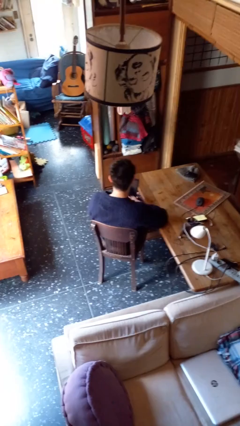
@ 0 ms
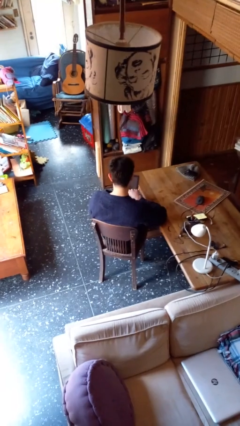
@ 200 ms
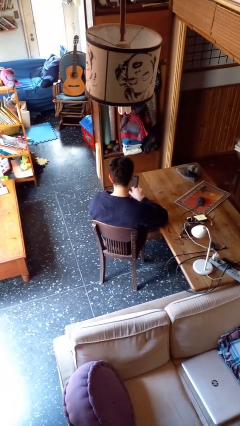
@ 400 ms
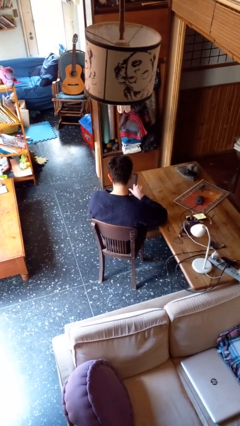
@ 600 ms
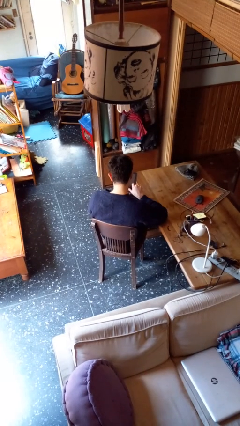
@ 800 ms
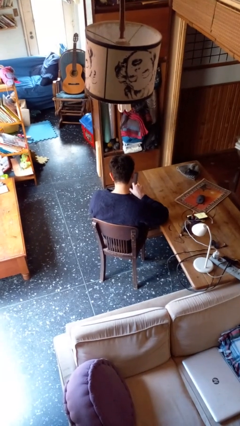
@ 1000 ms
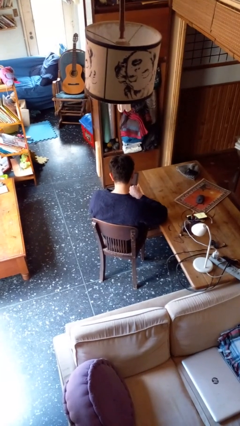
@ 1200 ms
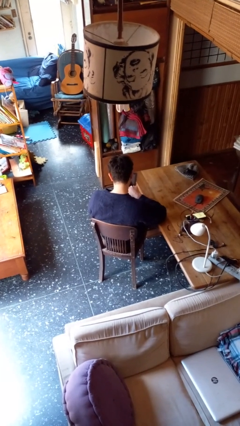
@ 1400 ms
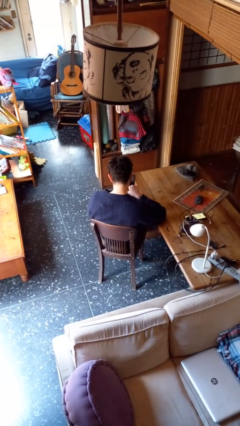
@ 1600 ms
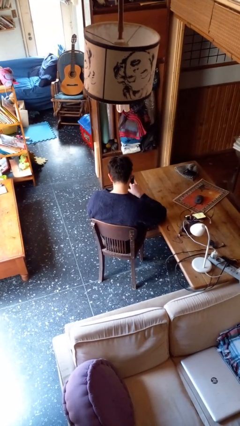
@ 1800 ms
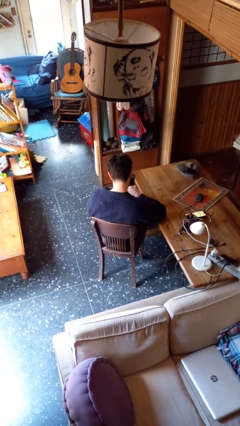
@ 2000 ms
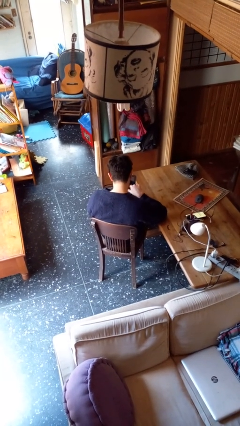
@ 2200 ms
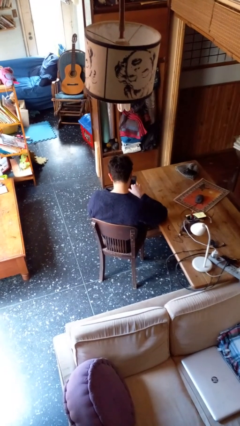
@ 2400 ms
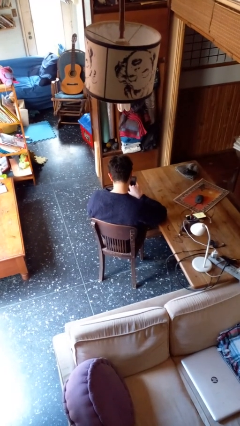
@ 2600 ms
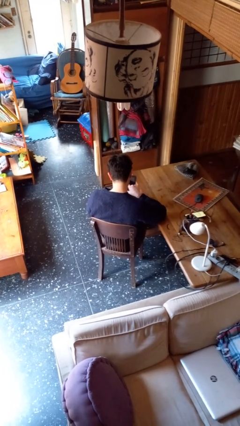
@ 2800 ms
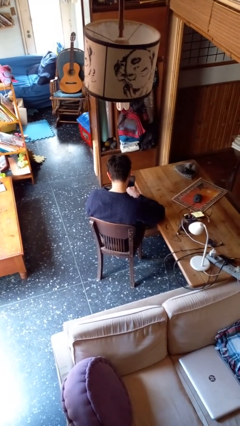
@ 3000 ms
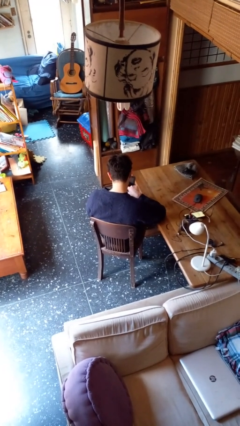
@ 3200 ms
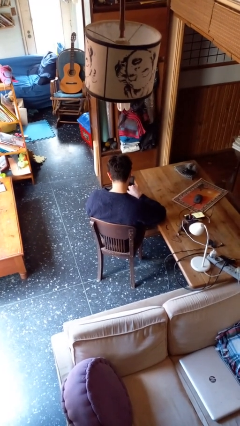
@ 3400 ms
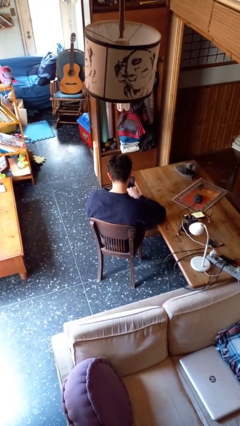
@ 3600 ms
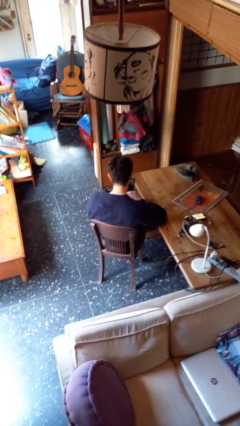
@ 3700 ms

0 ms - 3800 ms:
person interacts with tablet

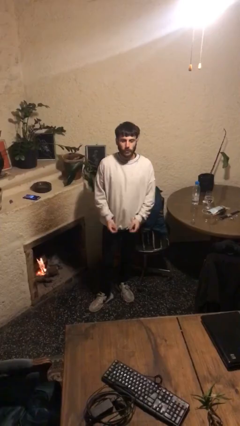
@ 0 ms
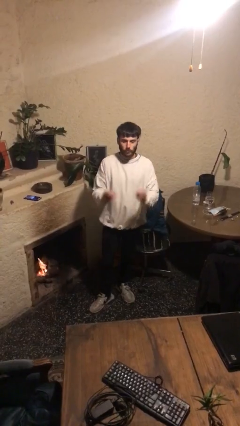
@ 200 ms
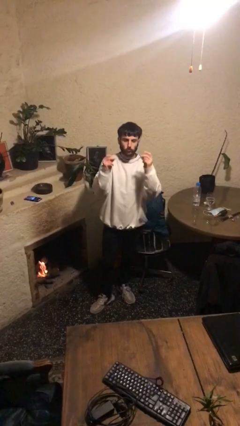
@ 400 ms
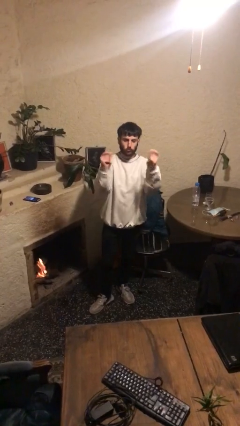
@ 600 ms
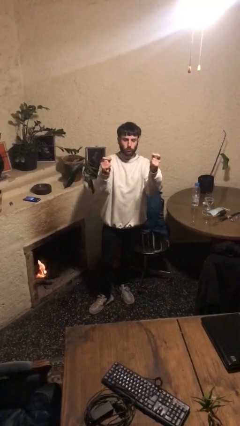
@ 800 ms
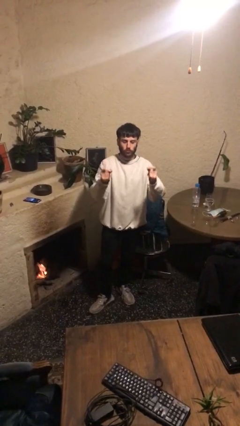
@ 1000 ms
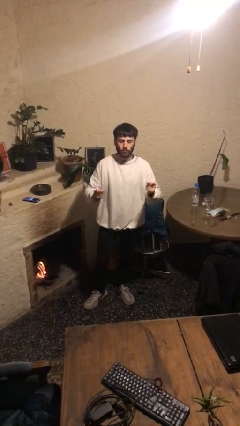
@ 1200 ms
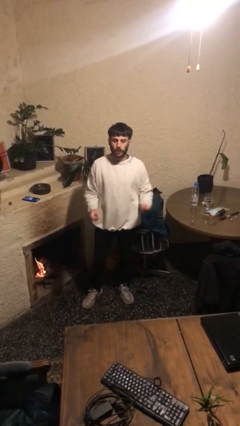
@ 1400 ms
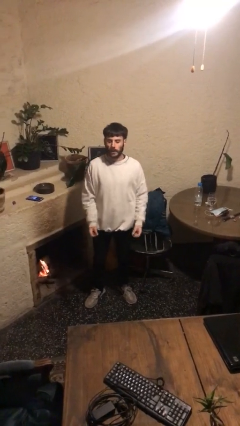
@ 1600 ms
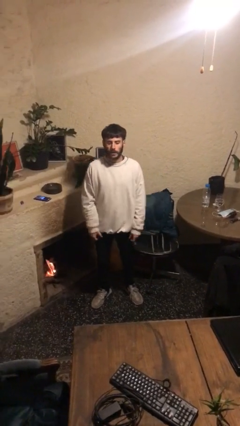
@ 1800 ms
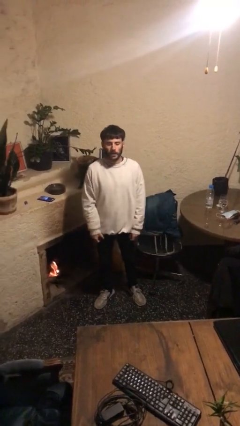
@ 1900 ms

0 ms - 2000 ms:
person snaps fingers

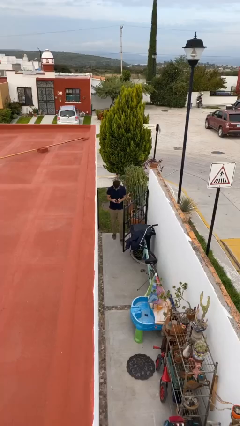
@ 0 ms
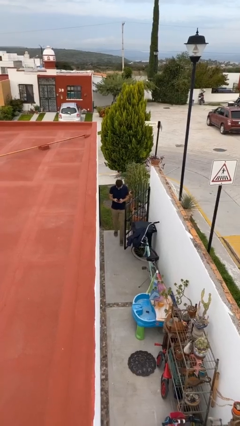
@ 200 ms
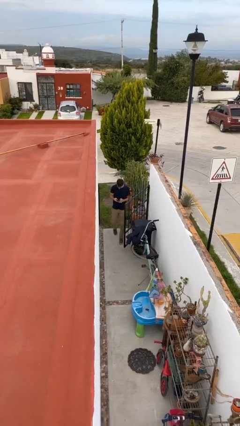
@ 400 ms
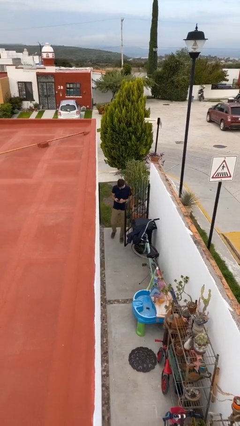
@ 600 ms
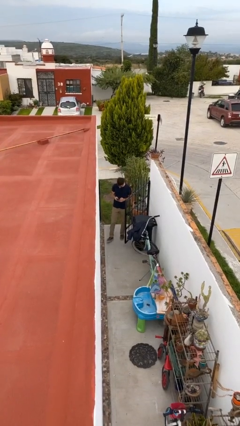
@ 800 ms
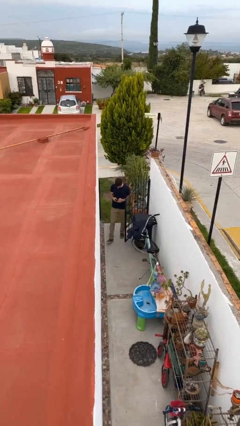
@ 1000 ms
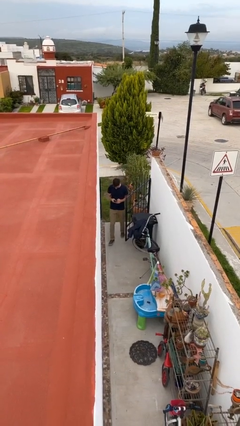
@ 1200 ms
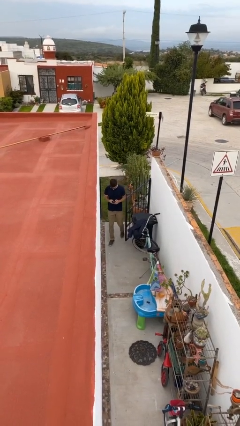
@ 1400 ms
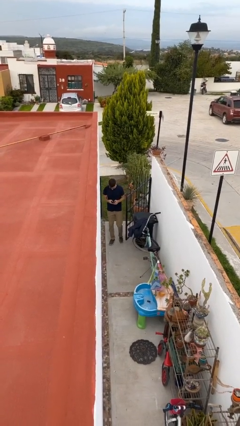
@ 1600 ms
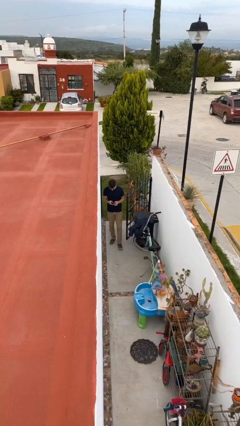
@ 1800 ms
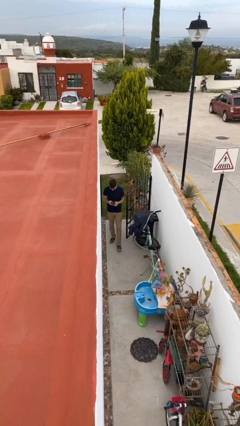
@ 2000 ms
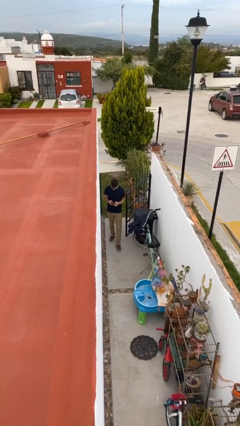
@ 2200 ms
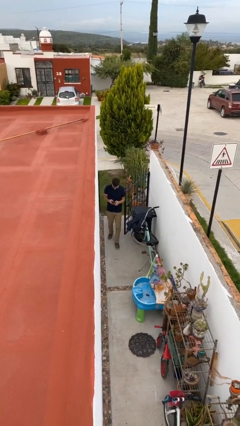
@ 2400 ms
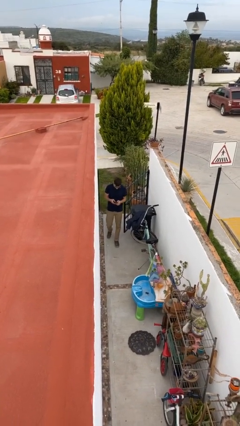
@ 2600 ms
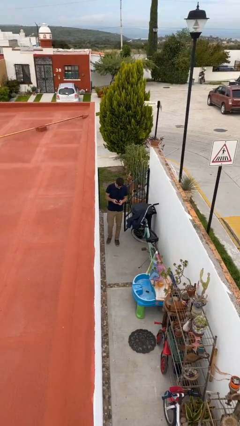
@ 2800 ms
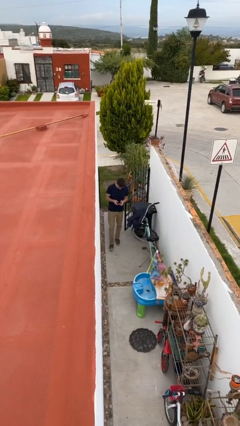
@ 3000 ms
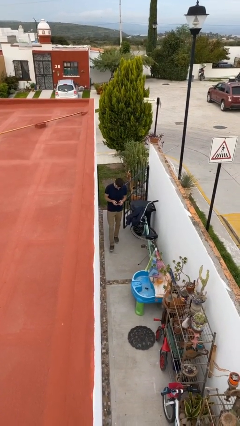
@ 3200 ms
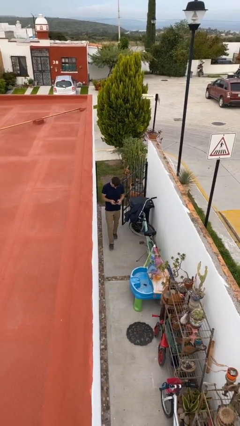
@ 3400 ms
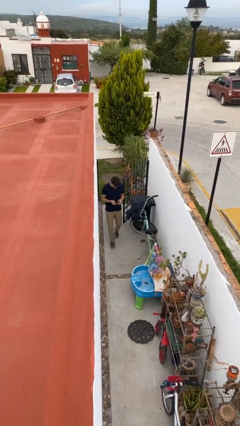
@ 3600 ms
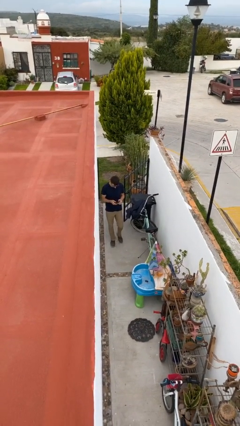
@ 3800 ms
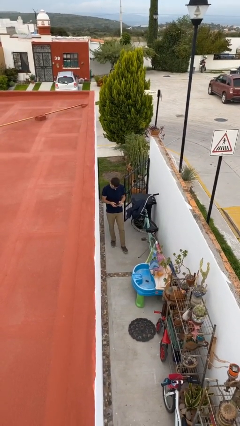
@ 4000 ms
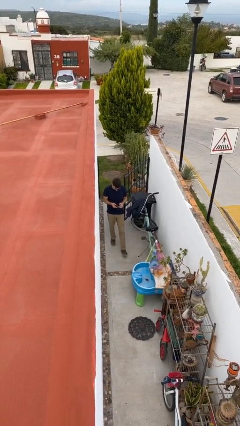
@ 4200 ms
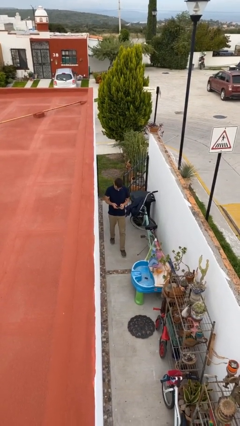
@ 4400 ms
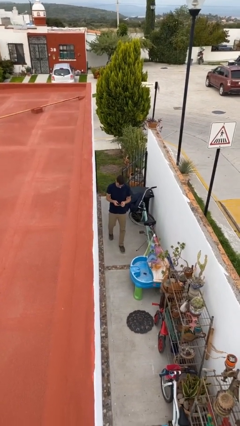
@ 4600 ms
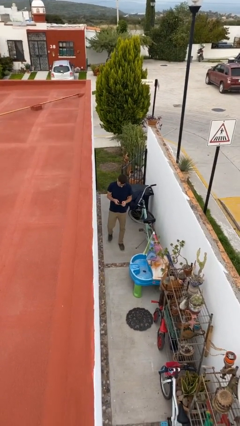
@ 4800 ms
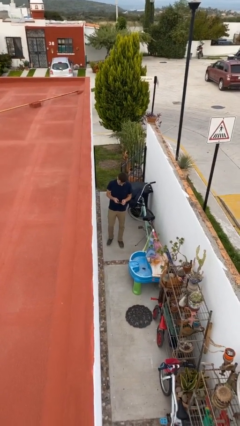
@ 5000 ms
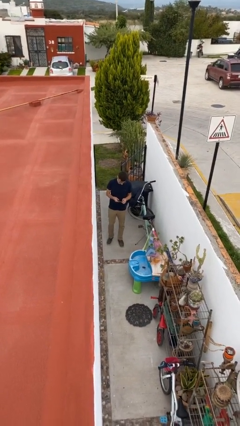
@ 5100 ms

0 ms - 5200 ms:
person texts on phone

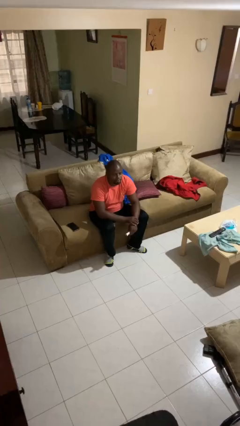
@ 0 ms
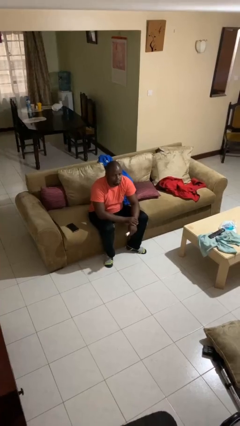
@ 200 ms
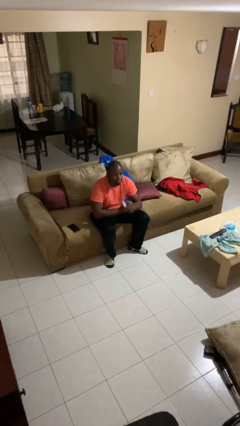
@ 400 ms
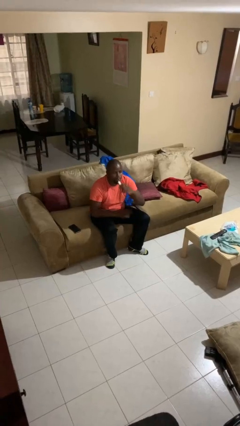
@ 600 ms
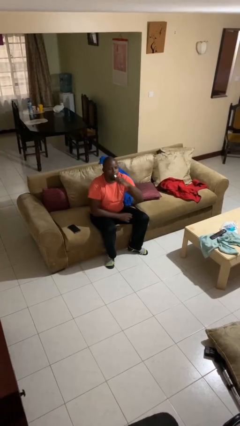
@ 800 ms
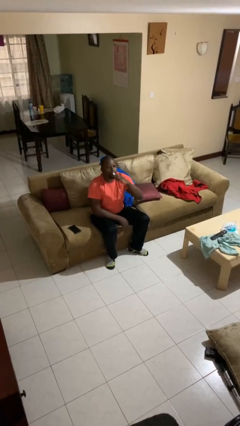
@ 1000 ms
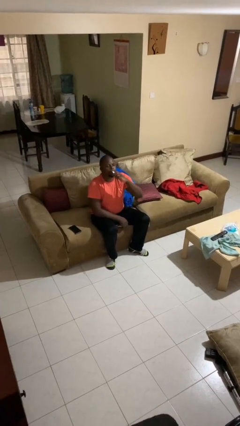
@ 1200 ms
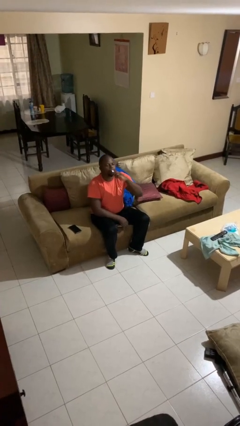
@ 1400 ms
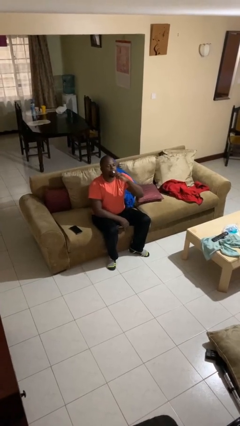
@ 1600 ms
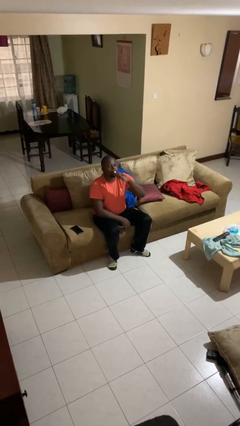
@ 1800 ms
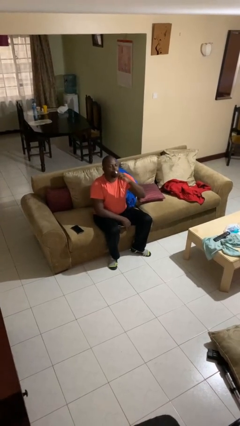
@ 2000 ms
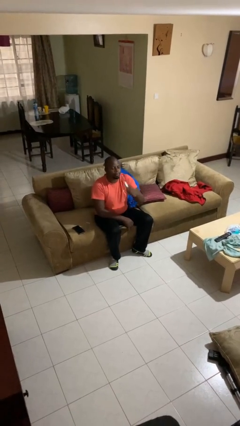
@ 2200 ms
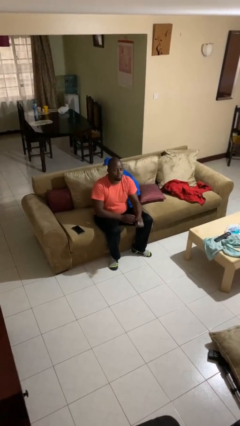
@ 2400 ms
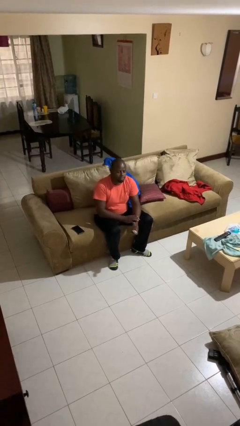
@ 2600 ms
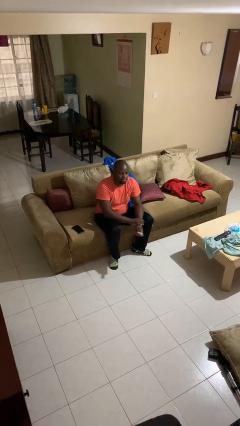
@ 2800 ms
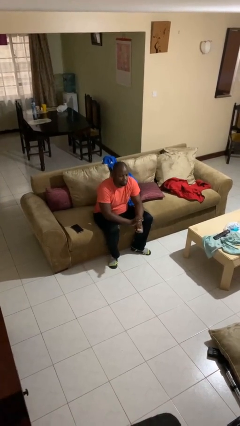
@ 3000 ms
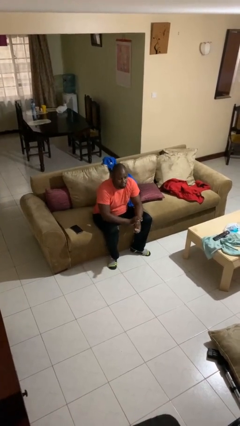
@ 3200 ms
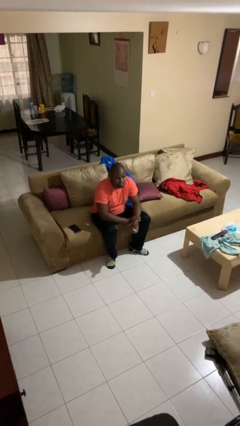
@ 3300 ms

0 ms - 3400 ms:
person vapes

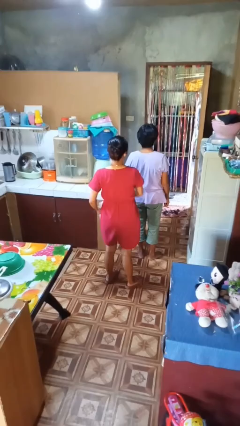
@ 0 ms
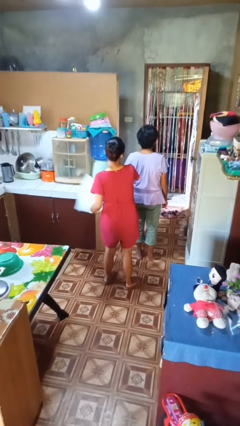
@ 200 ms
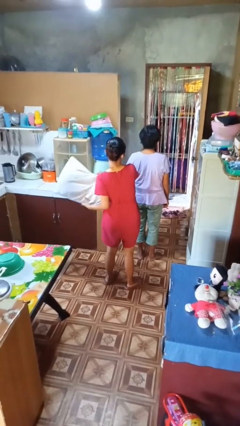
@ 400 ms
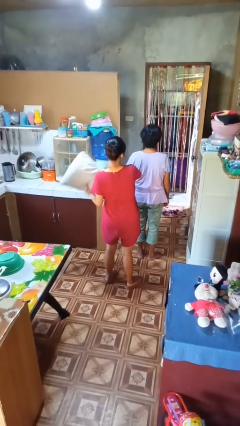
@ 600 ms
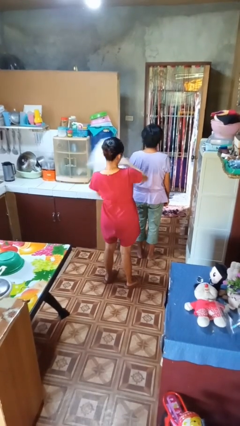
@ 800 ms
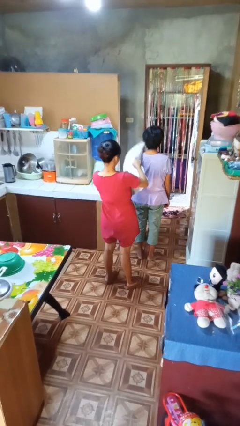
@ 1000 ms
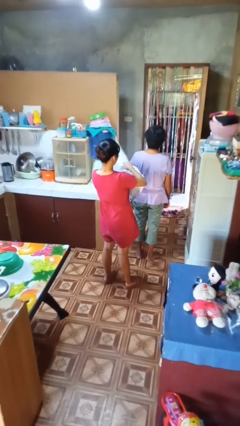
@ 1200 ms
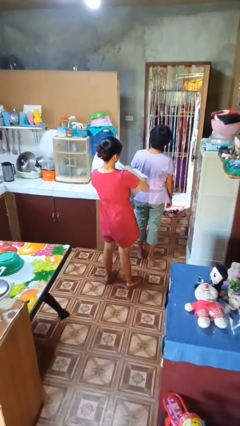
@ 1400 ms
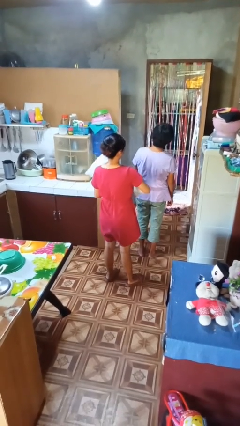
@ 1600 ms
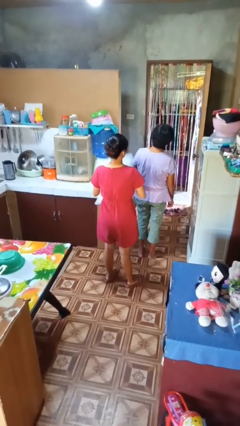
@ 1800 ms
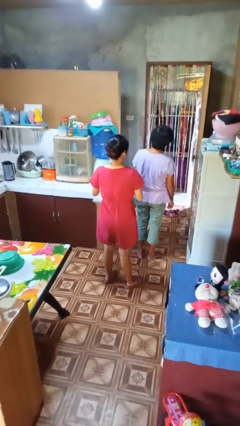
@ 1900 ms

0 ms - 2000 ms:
person hits person with pillow

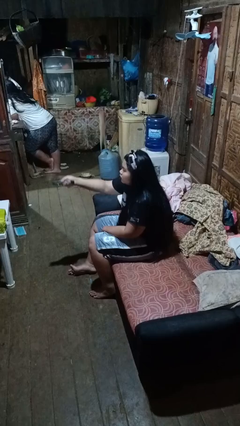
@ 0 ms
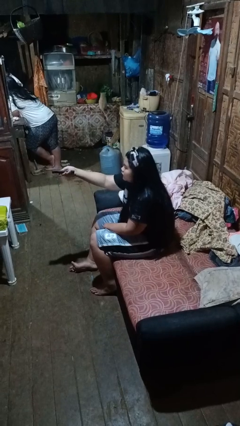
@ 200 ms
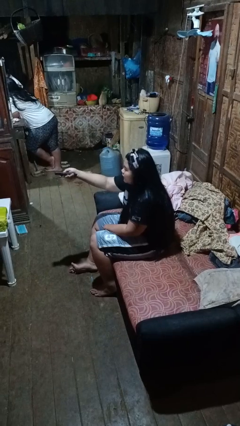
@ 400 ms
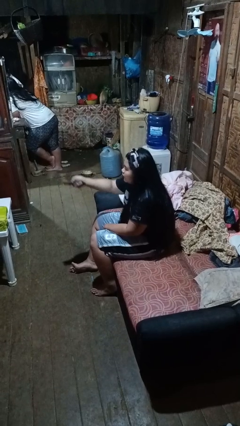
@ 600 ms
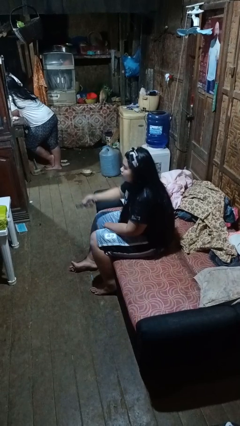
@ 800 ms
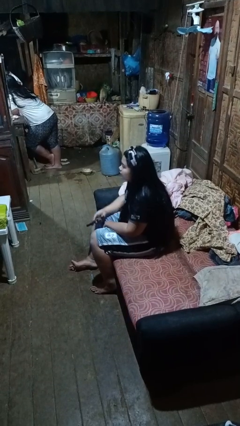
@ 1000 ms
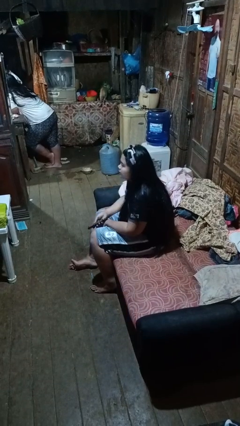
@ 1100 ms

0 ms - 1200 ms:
person uses television remote
